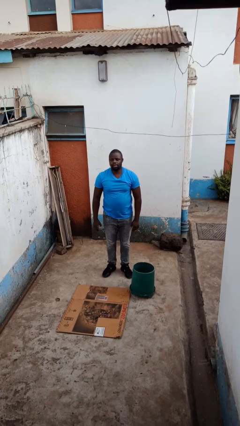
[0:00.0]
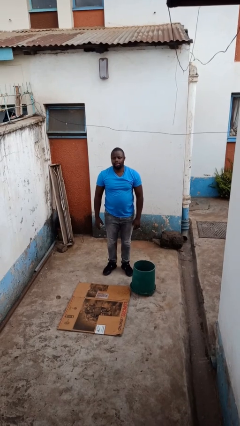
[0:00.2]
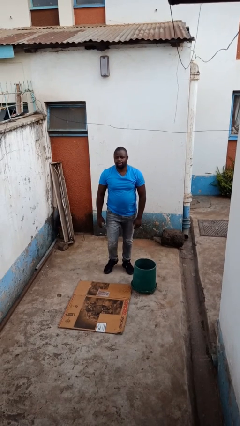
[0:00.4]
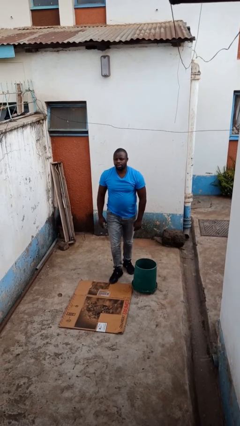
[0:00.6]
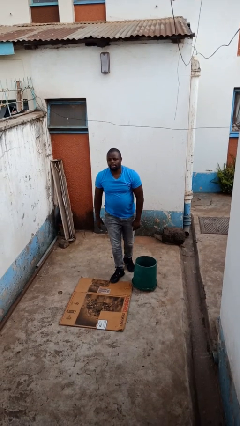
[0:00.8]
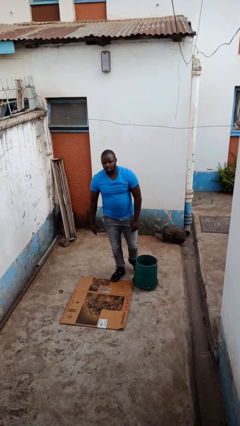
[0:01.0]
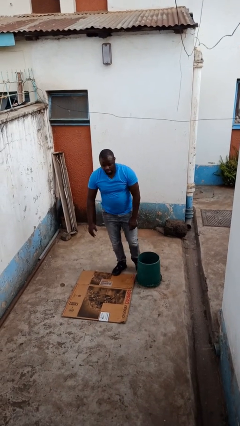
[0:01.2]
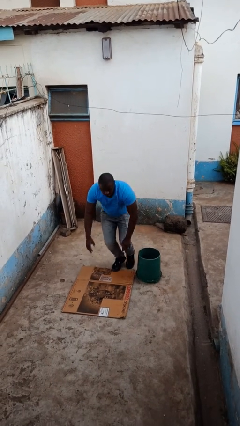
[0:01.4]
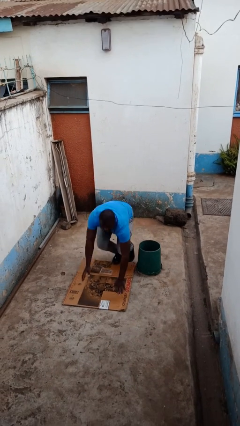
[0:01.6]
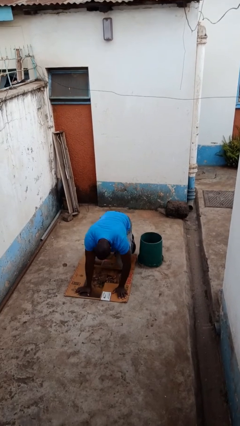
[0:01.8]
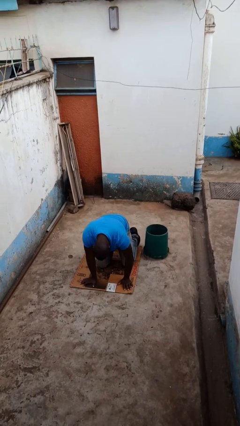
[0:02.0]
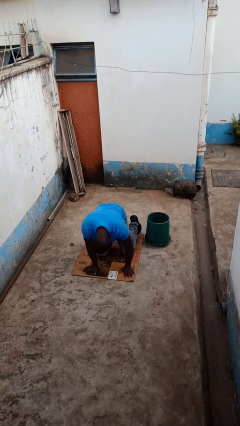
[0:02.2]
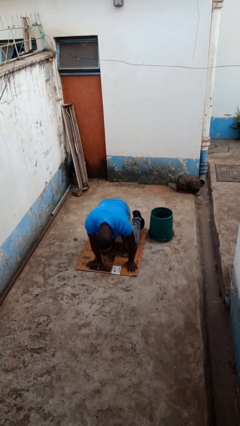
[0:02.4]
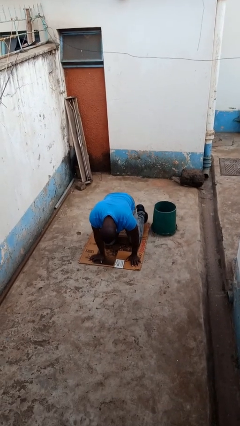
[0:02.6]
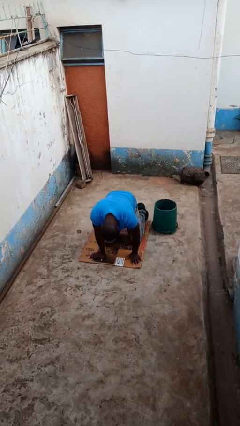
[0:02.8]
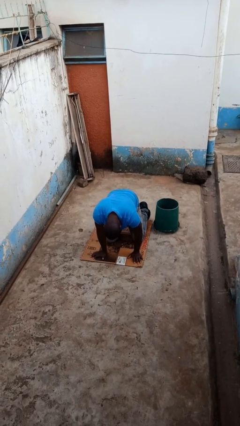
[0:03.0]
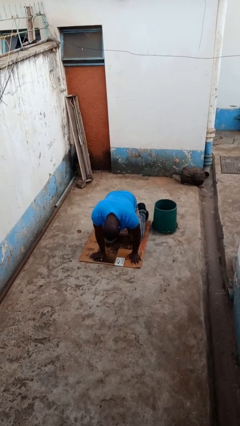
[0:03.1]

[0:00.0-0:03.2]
person trips on object on floor

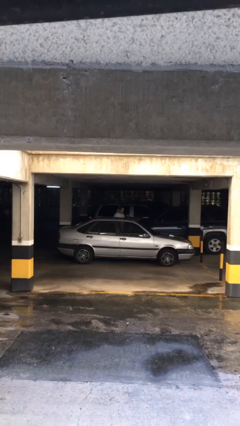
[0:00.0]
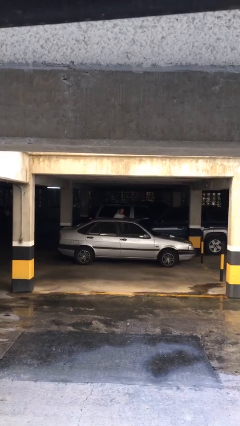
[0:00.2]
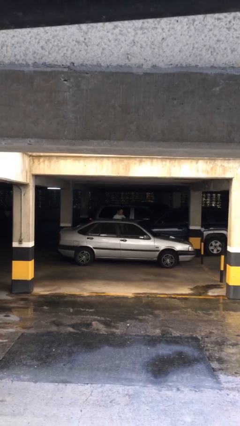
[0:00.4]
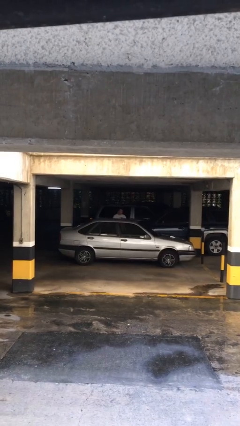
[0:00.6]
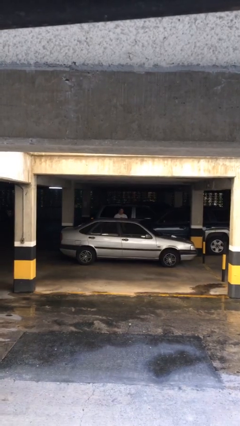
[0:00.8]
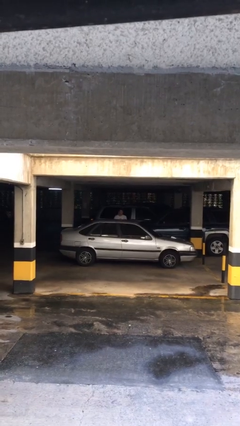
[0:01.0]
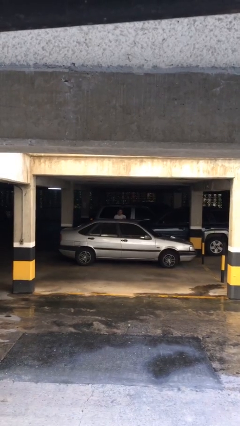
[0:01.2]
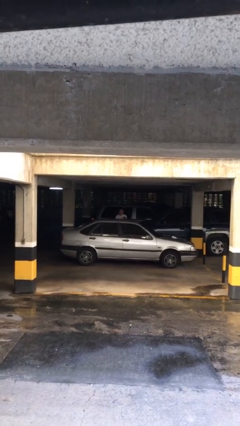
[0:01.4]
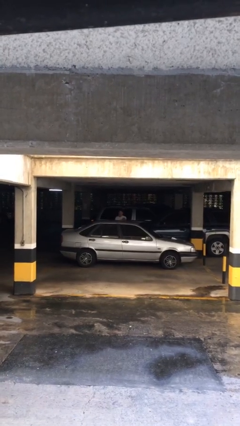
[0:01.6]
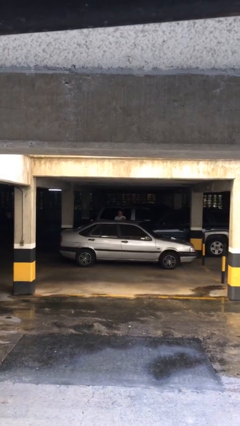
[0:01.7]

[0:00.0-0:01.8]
person closes car door

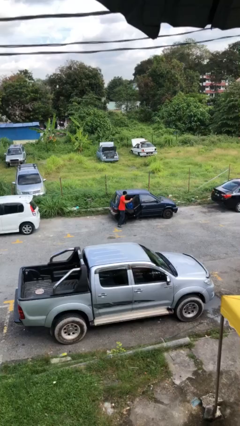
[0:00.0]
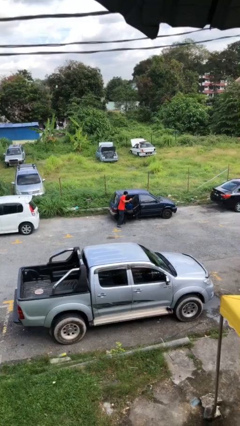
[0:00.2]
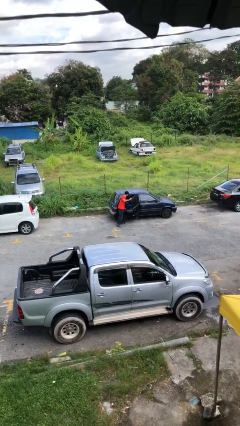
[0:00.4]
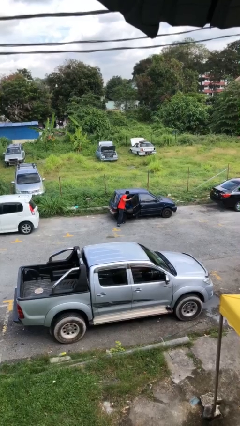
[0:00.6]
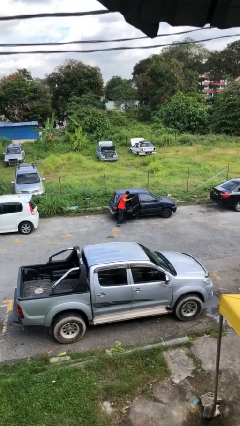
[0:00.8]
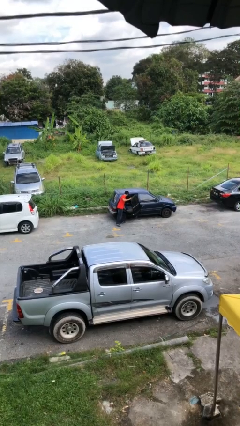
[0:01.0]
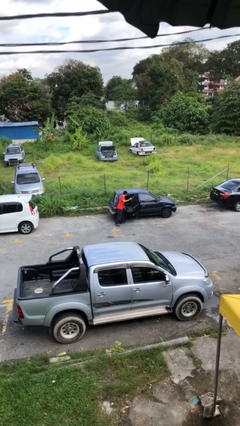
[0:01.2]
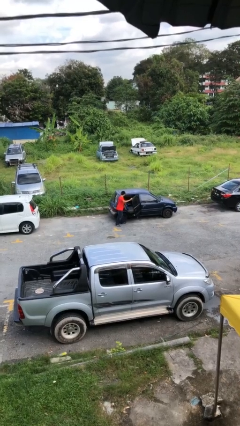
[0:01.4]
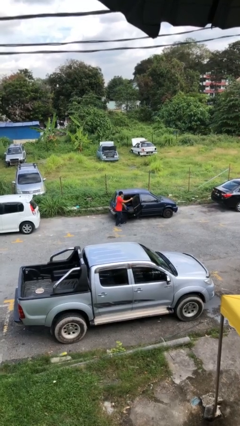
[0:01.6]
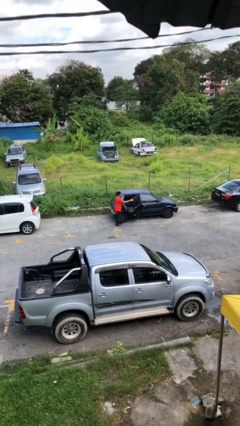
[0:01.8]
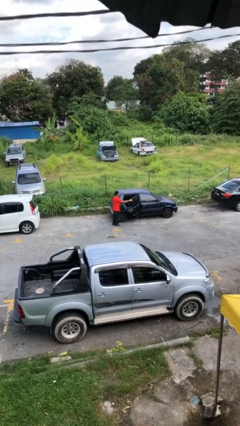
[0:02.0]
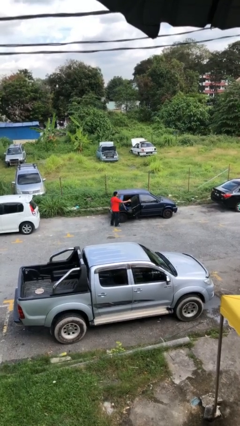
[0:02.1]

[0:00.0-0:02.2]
person loads car

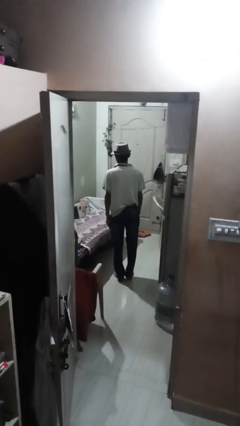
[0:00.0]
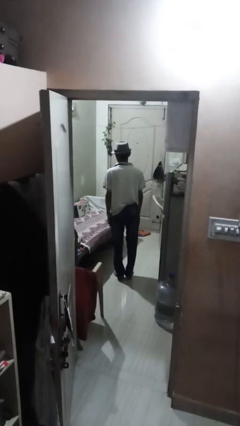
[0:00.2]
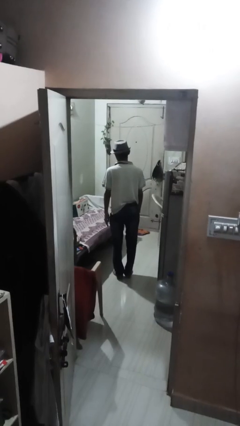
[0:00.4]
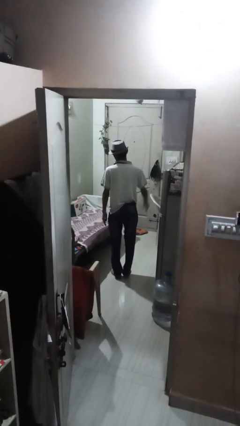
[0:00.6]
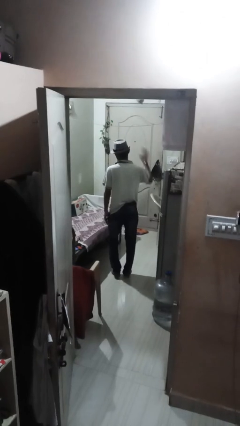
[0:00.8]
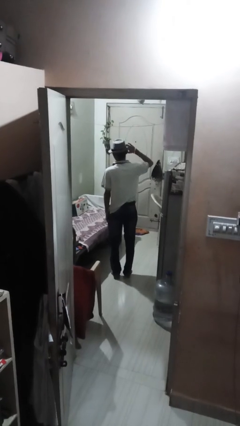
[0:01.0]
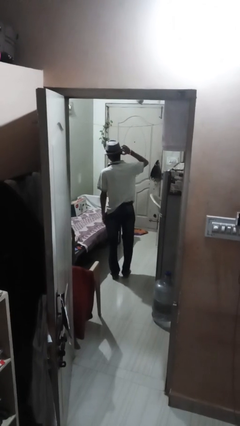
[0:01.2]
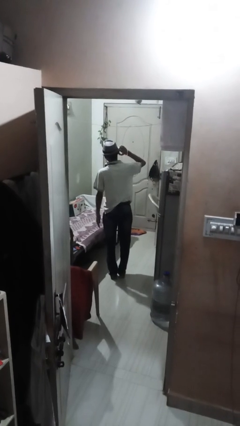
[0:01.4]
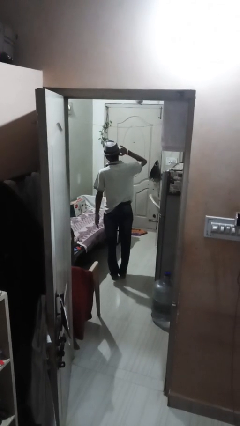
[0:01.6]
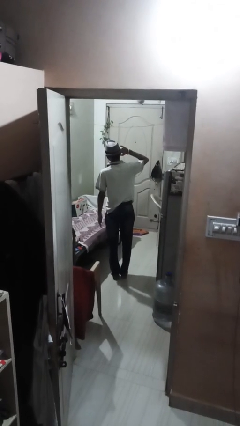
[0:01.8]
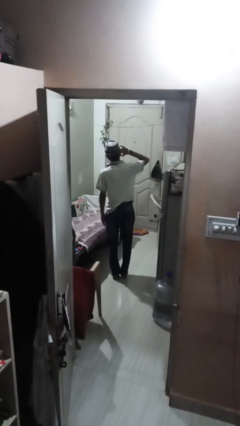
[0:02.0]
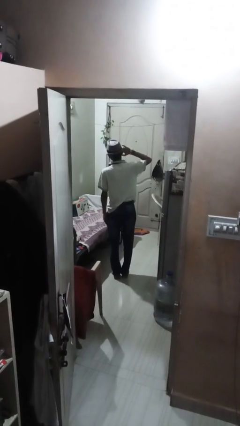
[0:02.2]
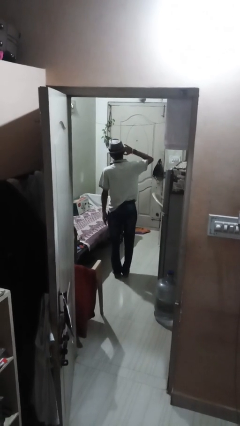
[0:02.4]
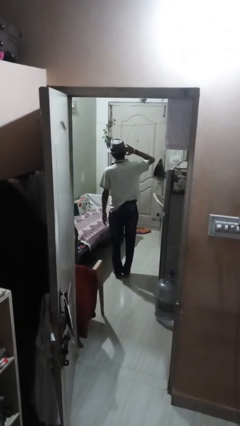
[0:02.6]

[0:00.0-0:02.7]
person salutes

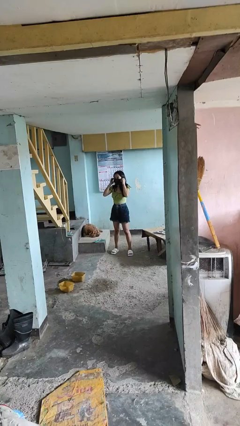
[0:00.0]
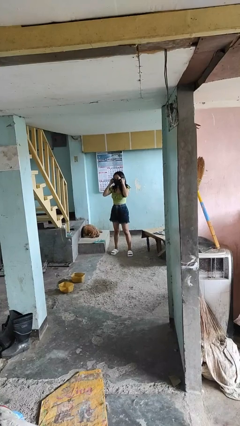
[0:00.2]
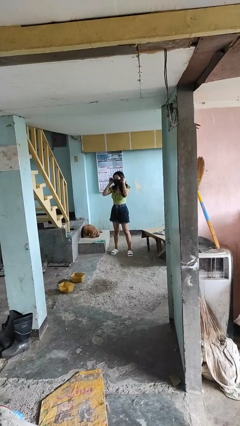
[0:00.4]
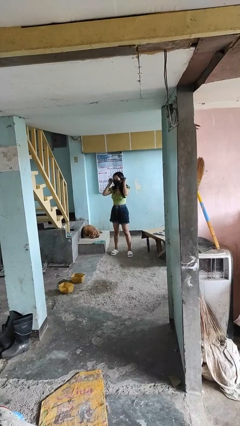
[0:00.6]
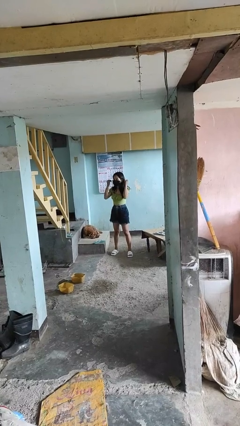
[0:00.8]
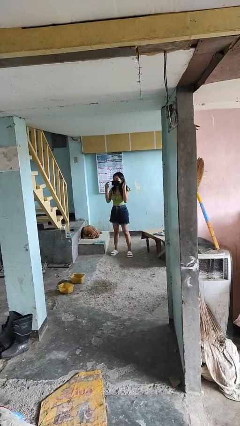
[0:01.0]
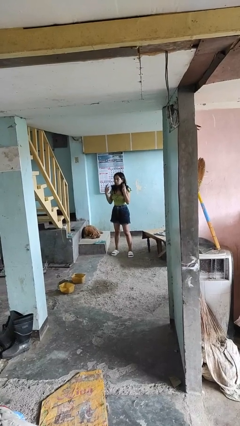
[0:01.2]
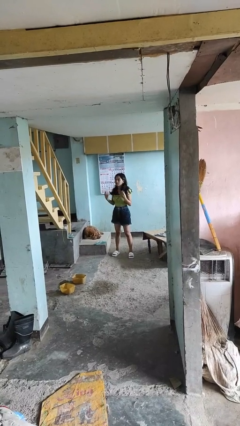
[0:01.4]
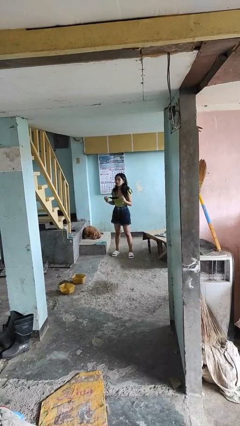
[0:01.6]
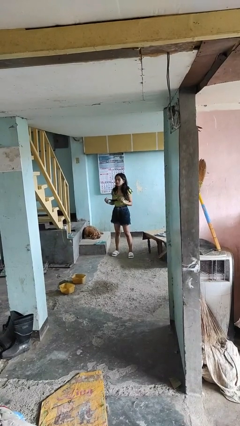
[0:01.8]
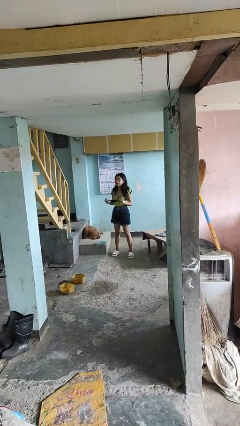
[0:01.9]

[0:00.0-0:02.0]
person takes off facemask

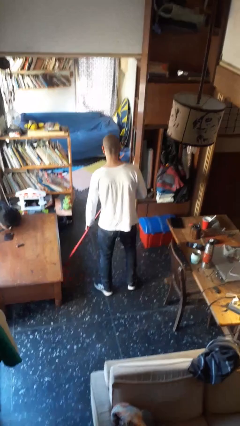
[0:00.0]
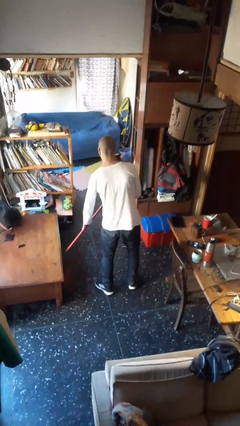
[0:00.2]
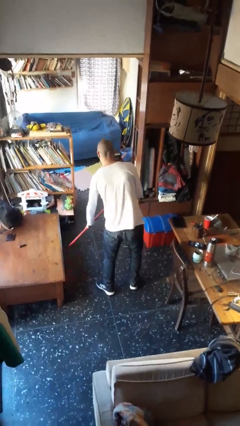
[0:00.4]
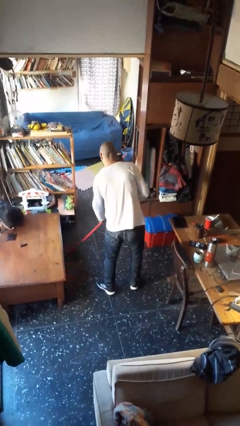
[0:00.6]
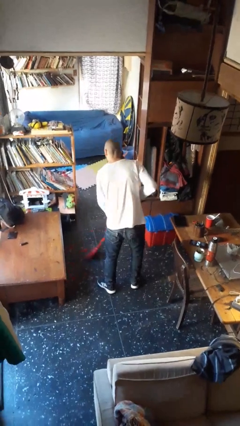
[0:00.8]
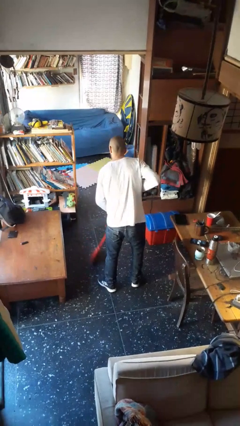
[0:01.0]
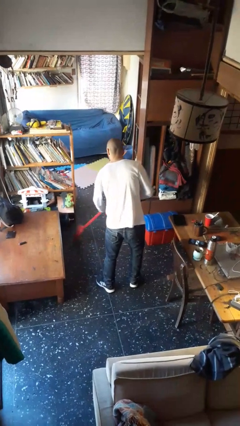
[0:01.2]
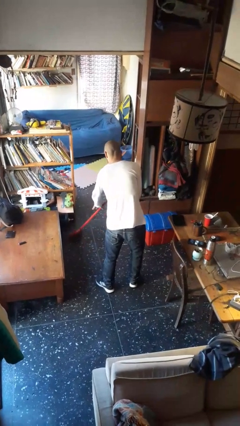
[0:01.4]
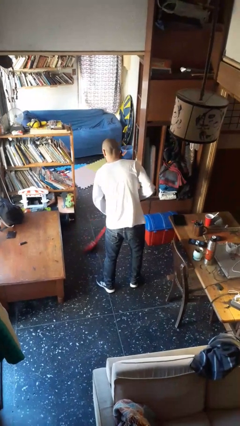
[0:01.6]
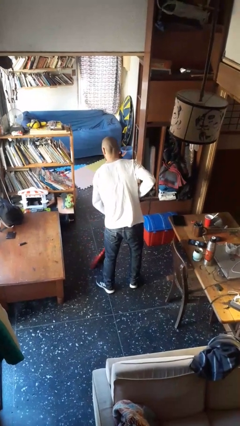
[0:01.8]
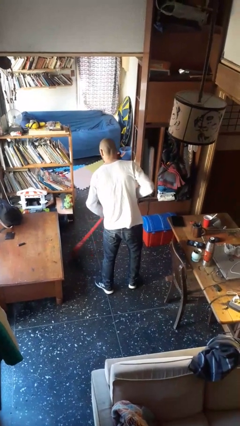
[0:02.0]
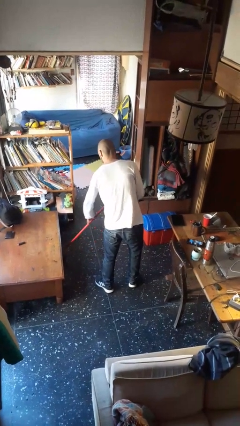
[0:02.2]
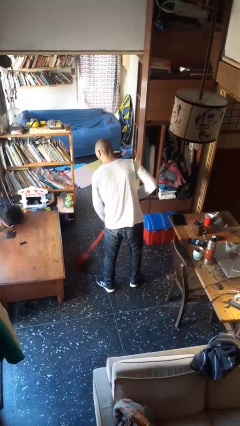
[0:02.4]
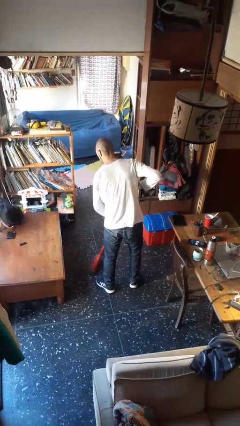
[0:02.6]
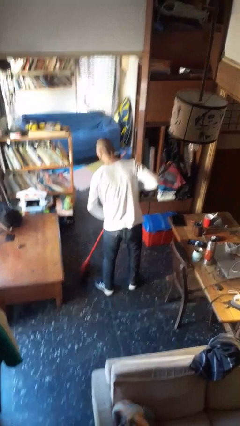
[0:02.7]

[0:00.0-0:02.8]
person sweeps floor

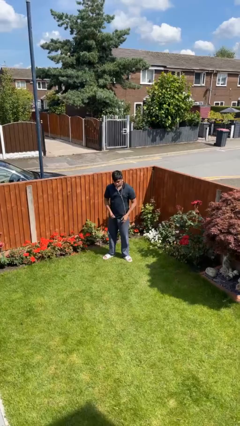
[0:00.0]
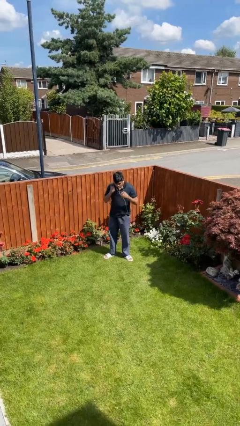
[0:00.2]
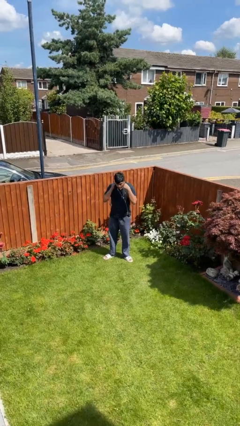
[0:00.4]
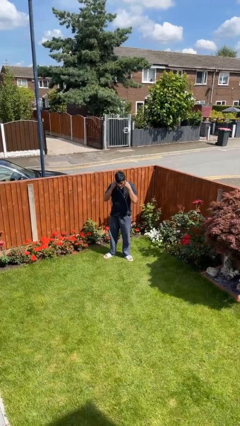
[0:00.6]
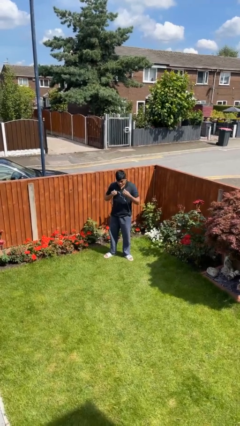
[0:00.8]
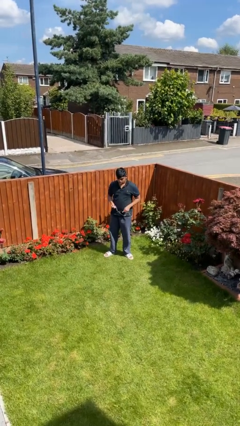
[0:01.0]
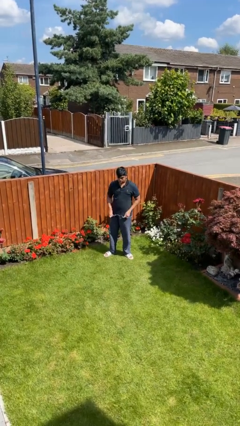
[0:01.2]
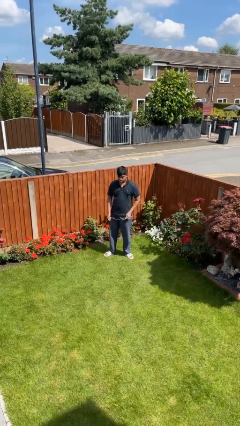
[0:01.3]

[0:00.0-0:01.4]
person takes off headphones

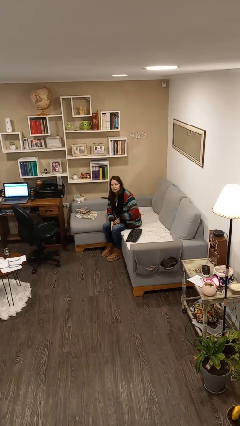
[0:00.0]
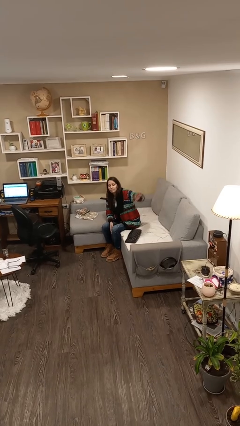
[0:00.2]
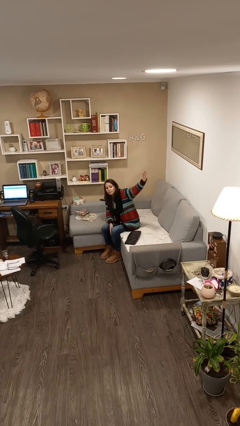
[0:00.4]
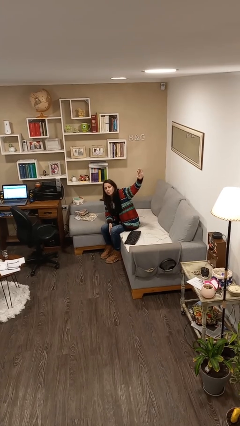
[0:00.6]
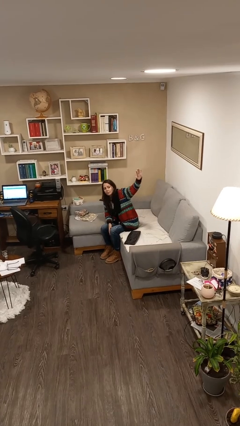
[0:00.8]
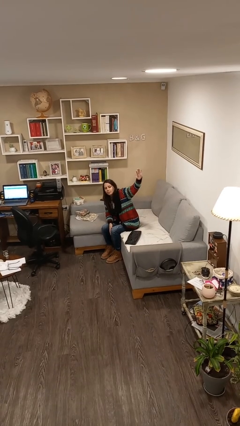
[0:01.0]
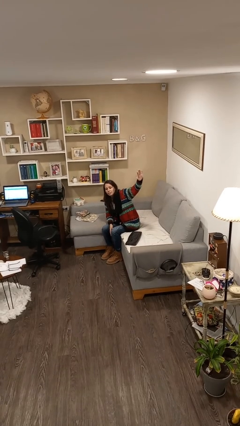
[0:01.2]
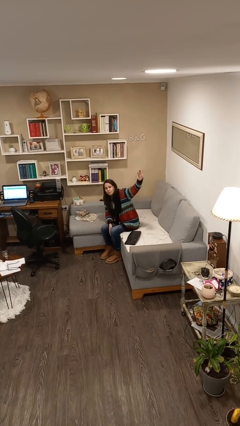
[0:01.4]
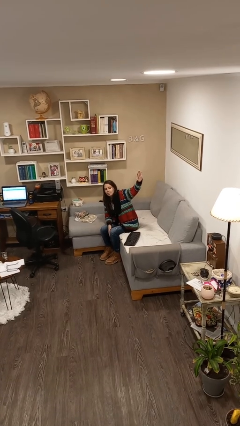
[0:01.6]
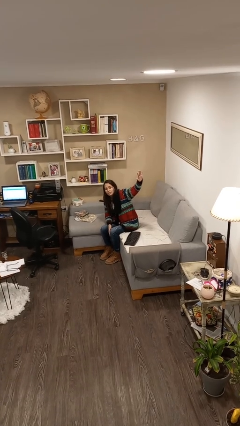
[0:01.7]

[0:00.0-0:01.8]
person gestures raise hand
